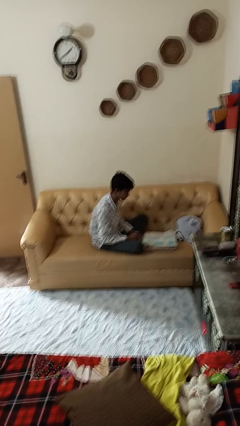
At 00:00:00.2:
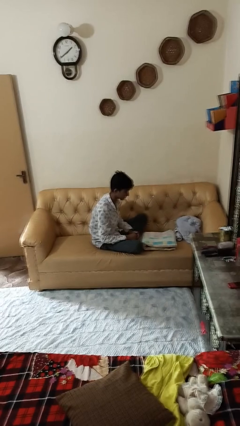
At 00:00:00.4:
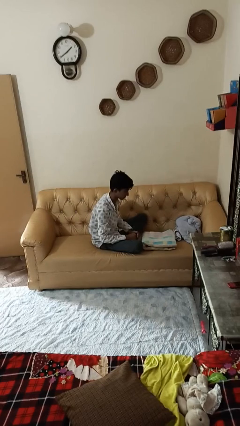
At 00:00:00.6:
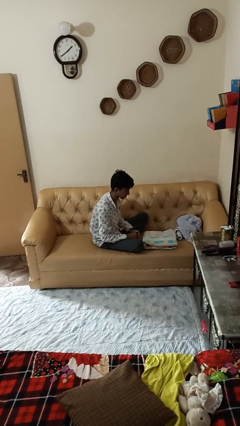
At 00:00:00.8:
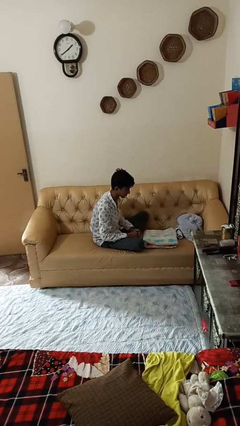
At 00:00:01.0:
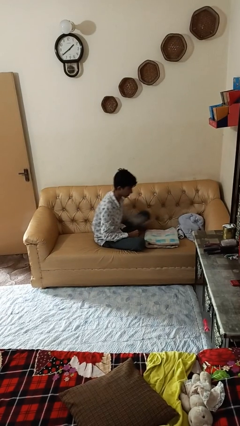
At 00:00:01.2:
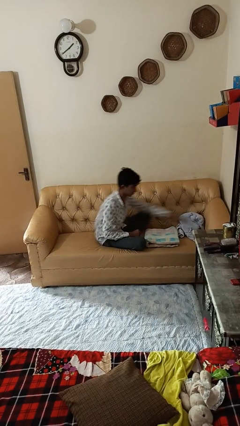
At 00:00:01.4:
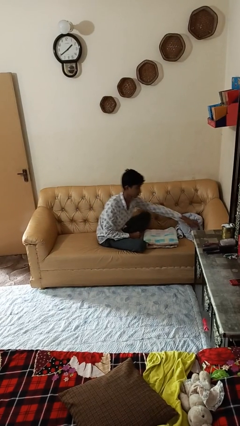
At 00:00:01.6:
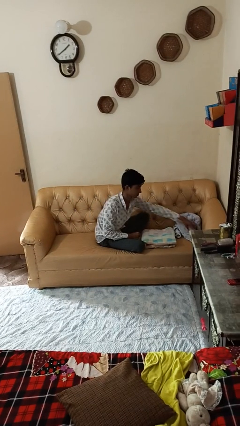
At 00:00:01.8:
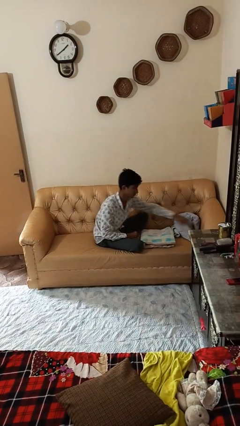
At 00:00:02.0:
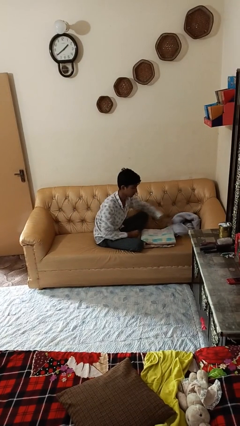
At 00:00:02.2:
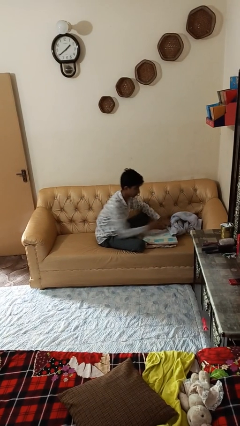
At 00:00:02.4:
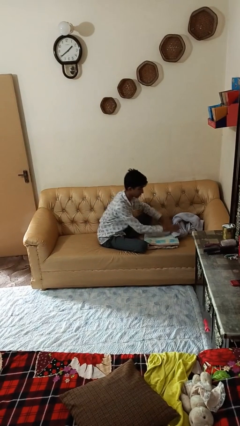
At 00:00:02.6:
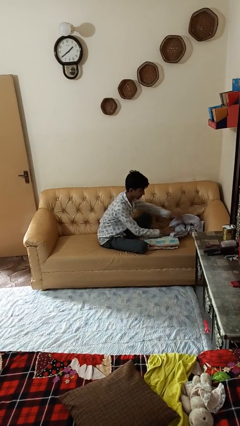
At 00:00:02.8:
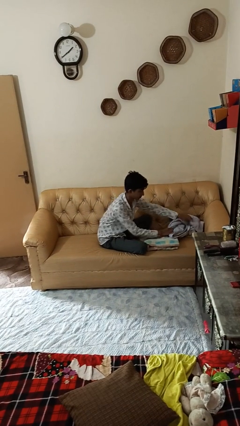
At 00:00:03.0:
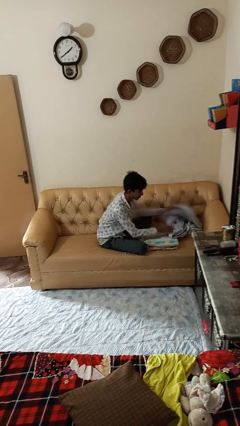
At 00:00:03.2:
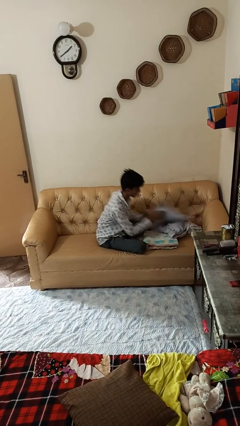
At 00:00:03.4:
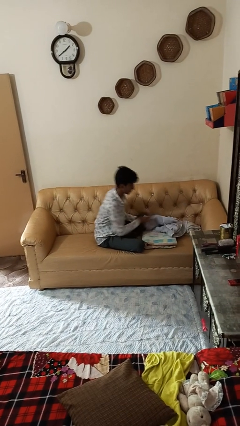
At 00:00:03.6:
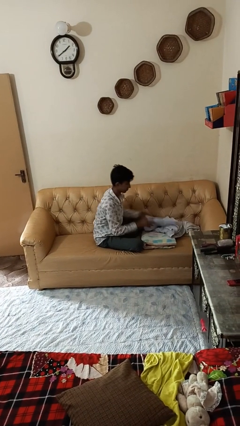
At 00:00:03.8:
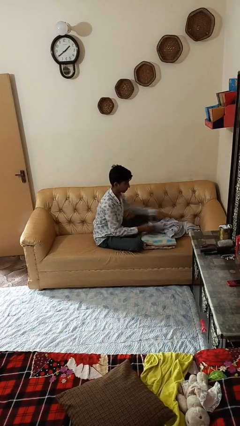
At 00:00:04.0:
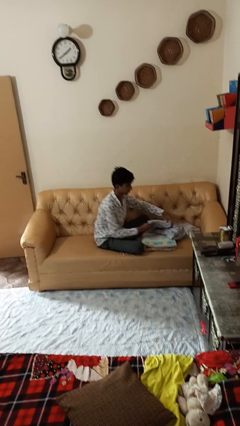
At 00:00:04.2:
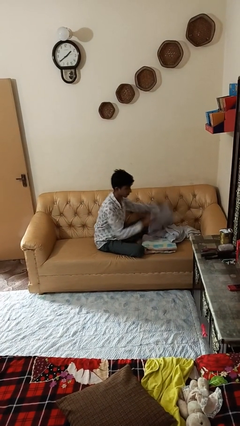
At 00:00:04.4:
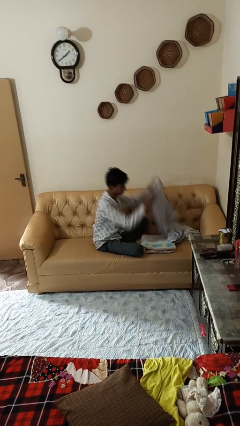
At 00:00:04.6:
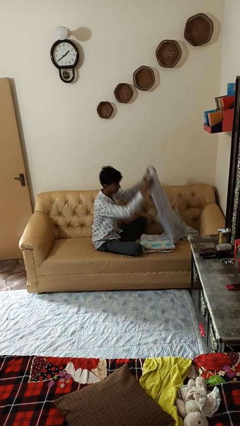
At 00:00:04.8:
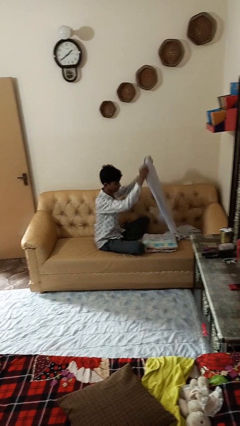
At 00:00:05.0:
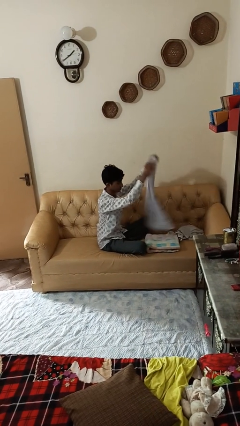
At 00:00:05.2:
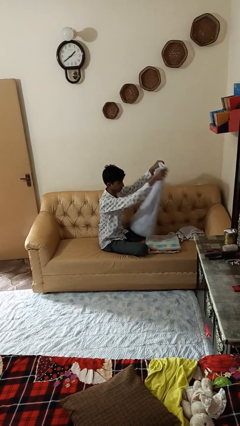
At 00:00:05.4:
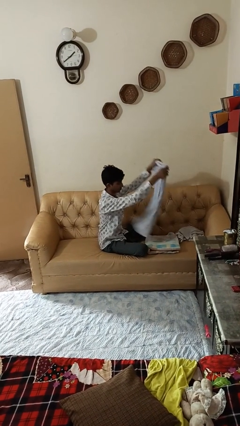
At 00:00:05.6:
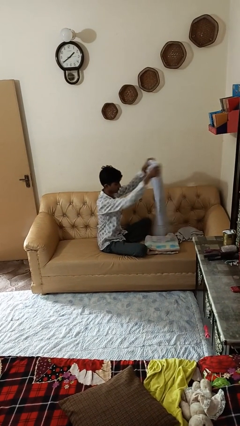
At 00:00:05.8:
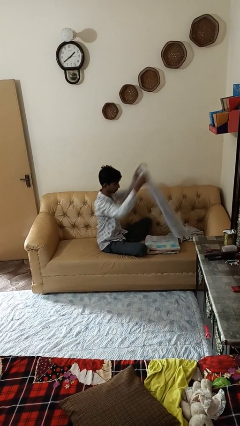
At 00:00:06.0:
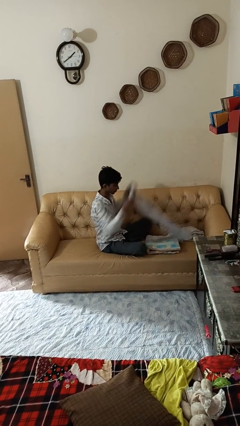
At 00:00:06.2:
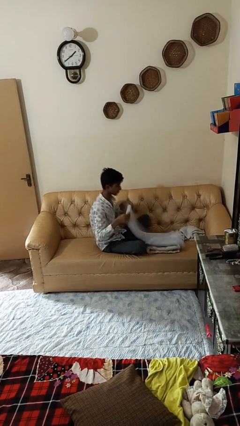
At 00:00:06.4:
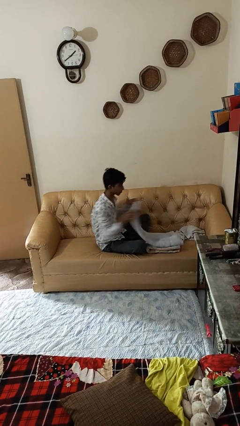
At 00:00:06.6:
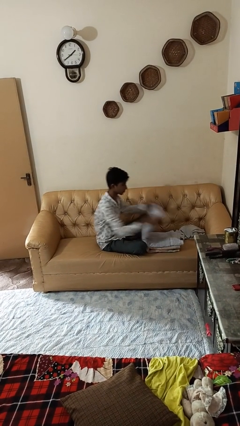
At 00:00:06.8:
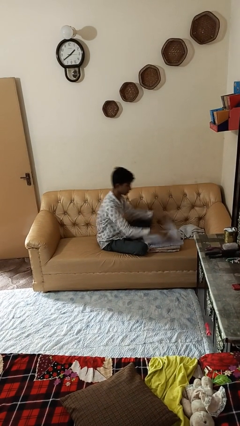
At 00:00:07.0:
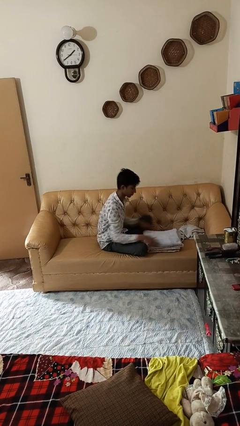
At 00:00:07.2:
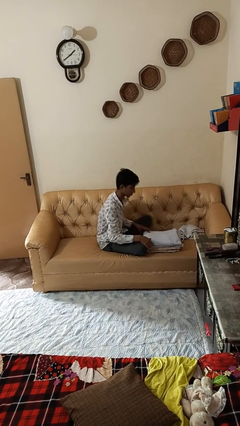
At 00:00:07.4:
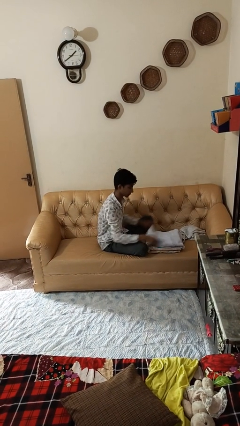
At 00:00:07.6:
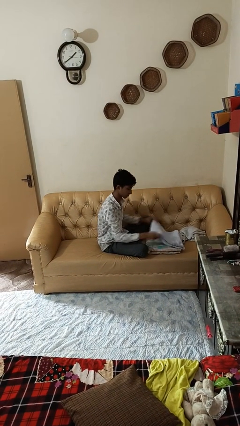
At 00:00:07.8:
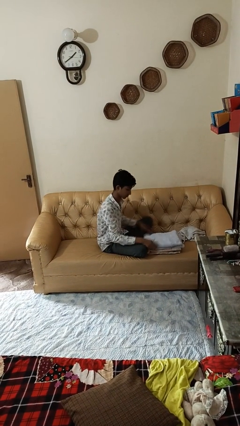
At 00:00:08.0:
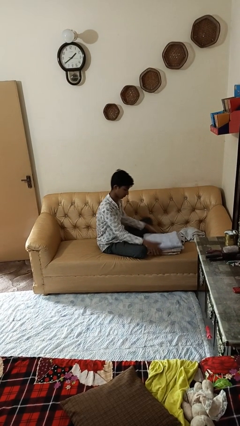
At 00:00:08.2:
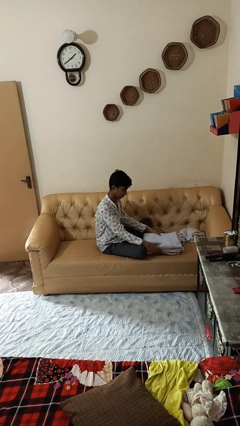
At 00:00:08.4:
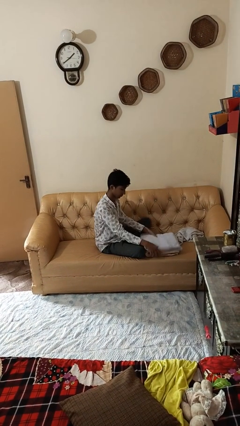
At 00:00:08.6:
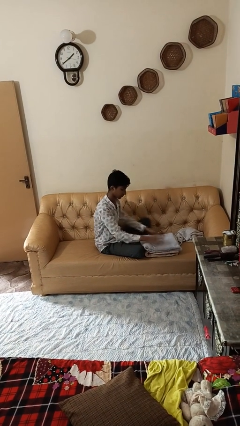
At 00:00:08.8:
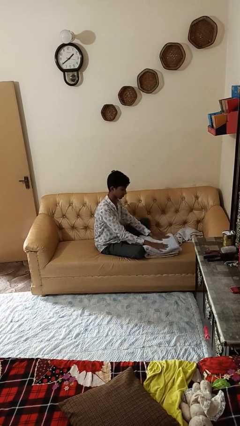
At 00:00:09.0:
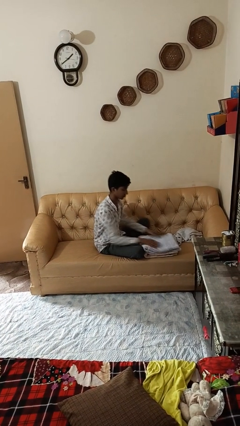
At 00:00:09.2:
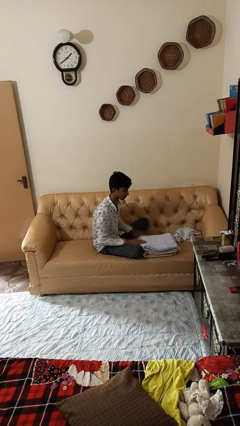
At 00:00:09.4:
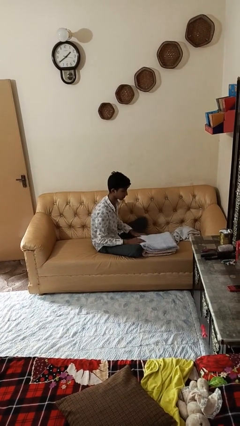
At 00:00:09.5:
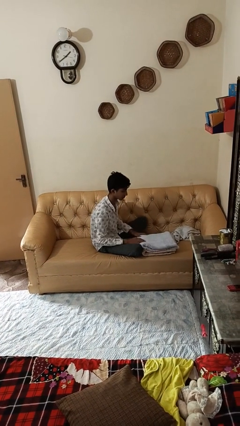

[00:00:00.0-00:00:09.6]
person folds towel

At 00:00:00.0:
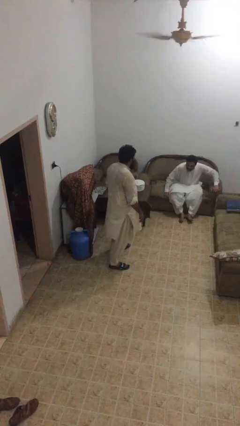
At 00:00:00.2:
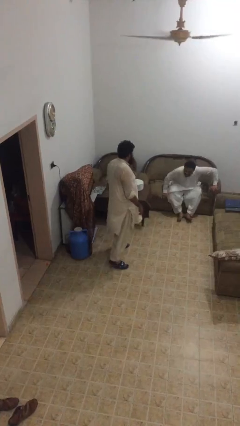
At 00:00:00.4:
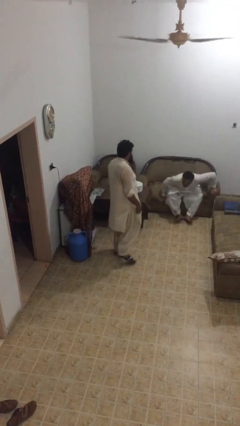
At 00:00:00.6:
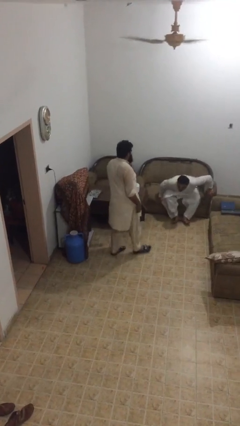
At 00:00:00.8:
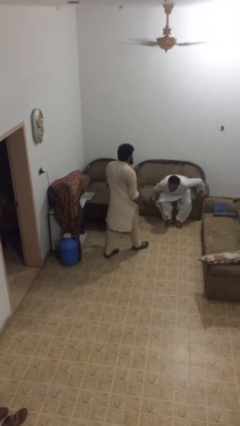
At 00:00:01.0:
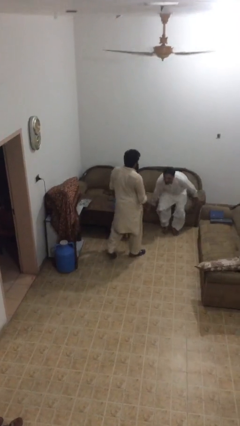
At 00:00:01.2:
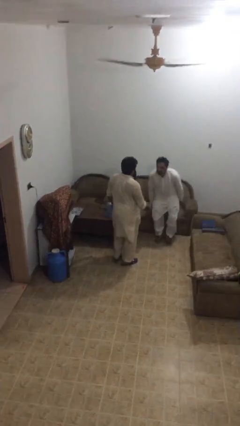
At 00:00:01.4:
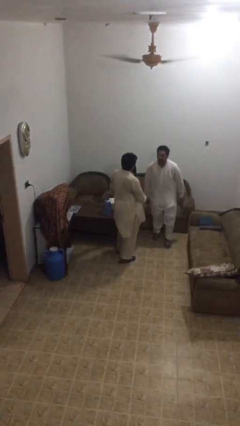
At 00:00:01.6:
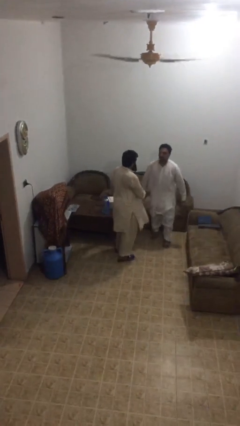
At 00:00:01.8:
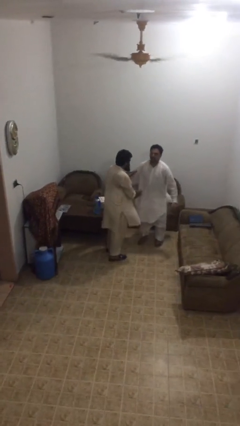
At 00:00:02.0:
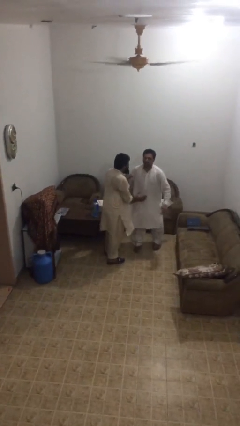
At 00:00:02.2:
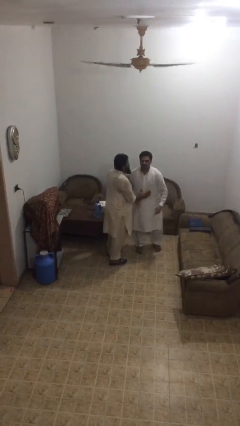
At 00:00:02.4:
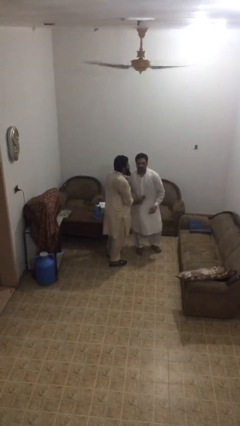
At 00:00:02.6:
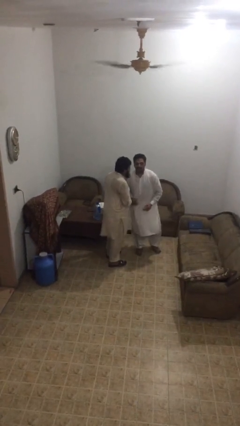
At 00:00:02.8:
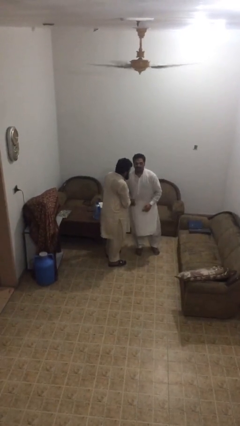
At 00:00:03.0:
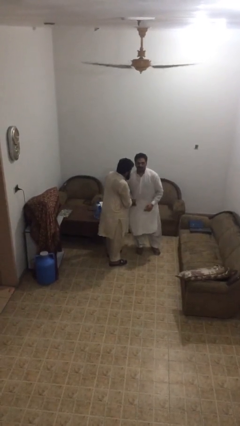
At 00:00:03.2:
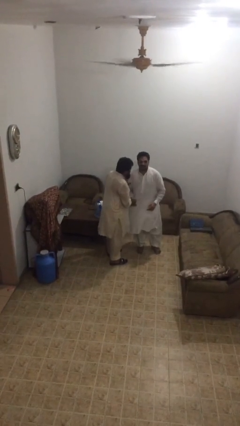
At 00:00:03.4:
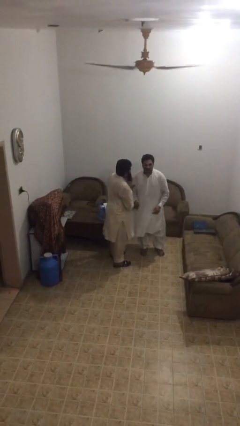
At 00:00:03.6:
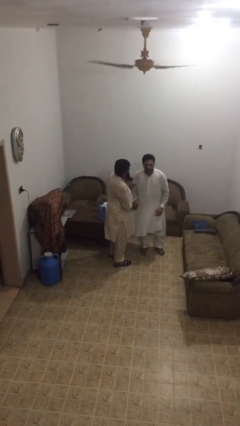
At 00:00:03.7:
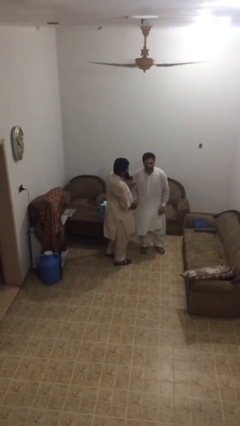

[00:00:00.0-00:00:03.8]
person shakes hand

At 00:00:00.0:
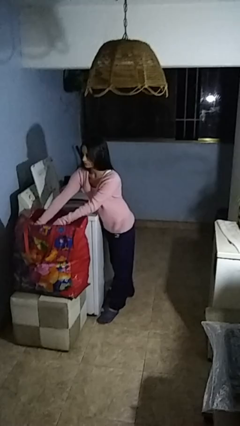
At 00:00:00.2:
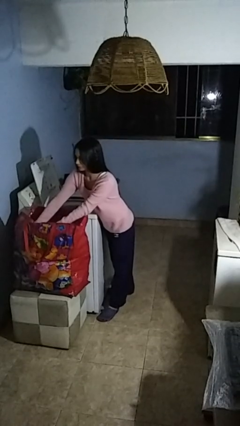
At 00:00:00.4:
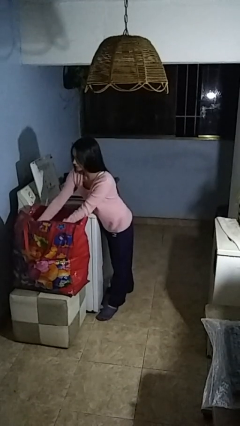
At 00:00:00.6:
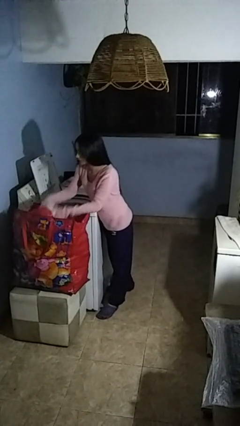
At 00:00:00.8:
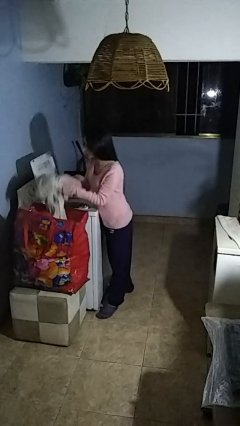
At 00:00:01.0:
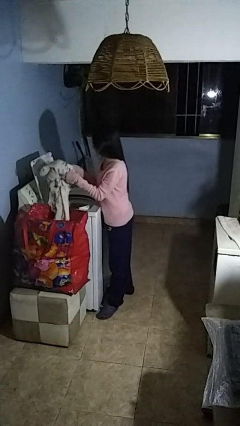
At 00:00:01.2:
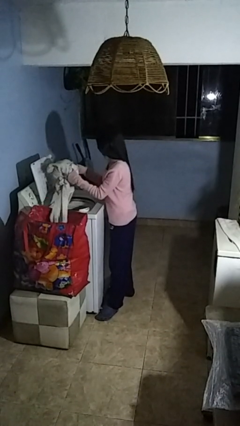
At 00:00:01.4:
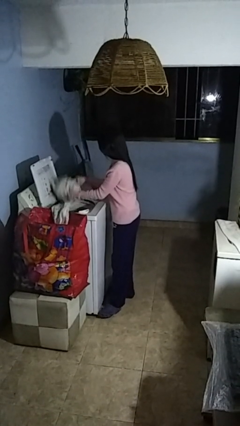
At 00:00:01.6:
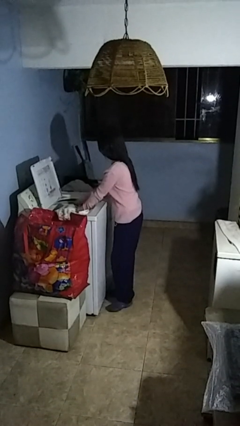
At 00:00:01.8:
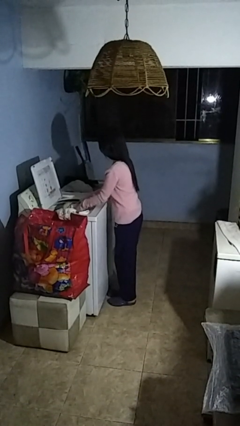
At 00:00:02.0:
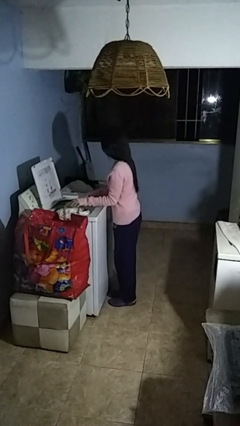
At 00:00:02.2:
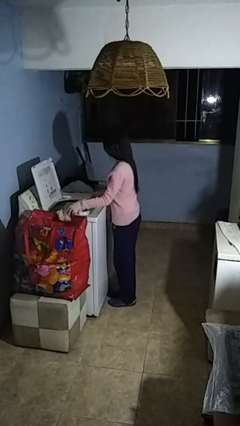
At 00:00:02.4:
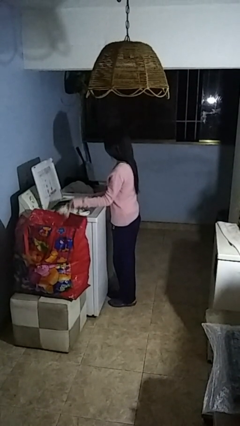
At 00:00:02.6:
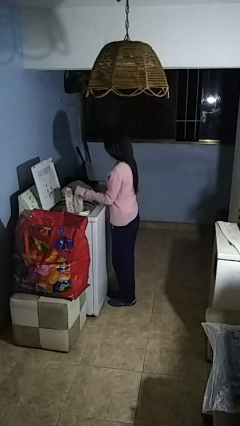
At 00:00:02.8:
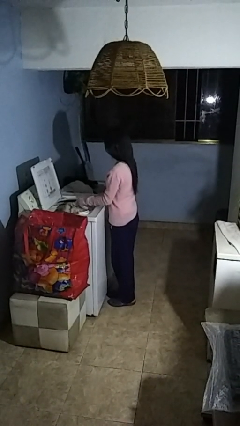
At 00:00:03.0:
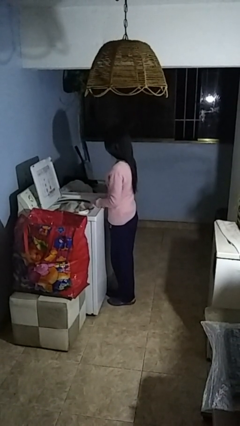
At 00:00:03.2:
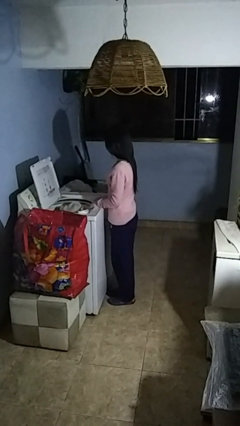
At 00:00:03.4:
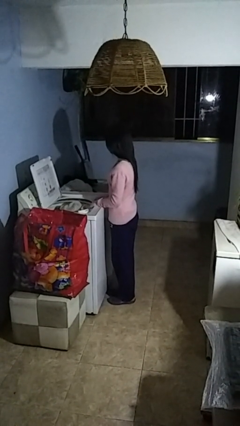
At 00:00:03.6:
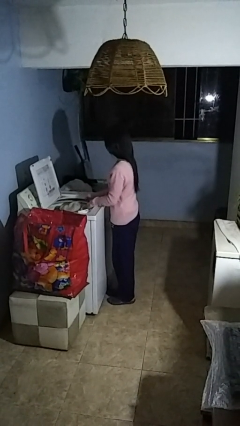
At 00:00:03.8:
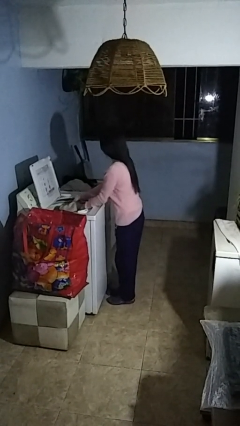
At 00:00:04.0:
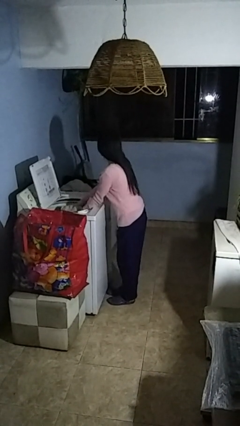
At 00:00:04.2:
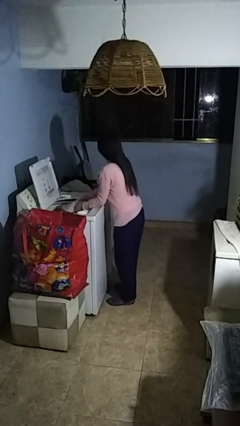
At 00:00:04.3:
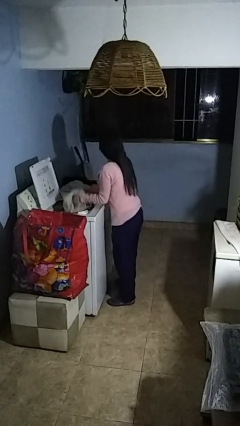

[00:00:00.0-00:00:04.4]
person loads clotheswasher
